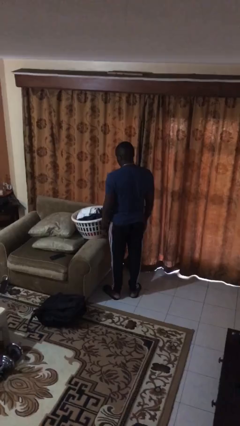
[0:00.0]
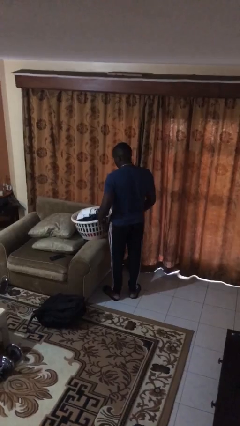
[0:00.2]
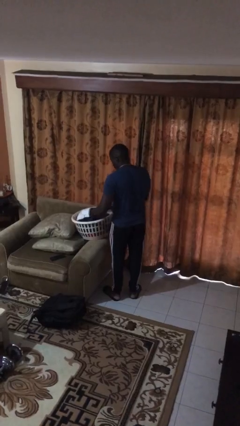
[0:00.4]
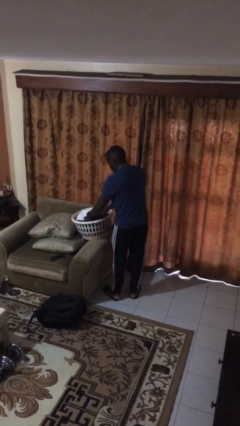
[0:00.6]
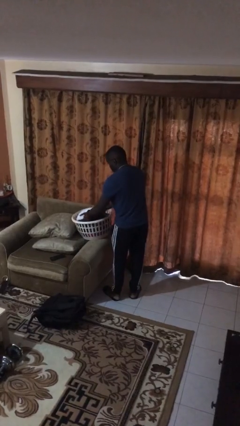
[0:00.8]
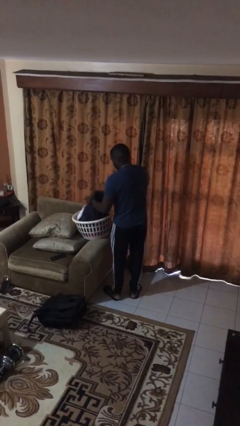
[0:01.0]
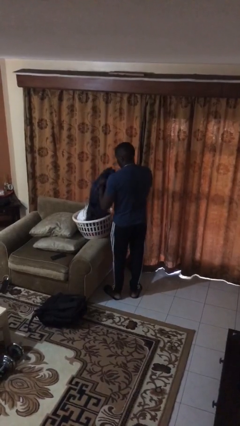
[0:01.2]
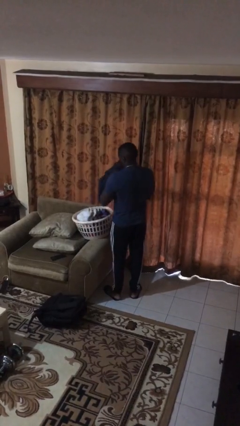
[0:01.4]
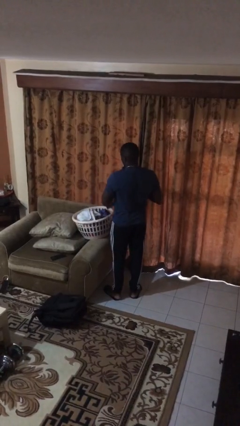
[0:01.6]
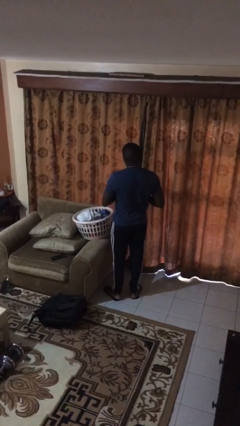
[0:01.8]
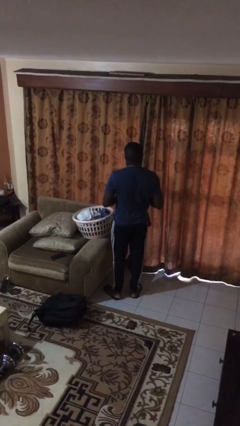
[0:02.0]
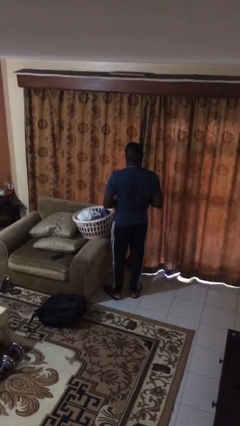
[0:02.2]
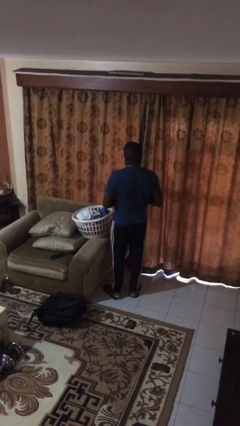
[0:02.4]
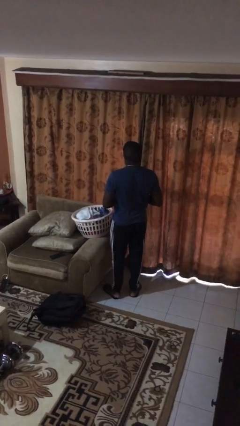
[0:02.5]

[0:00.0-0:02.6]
person takes object from basket

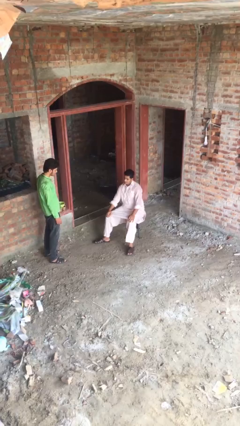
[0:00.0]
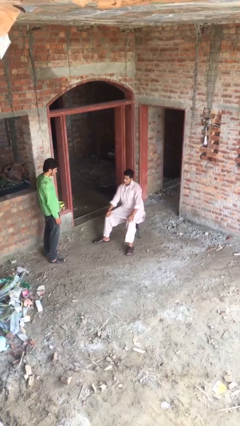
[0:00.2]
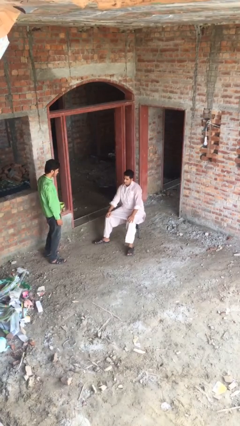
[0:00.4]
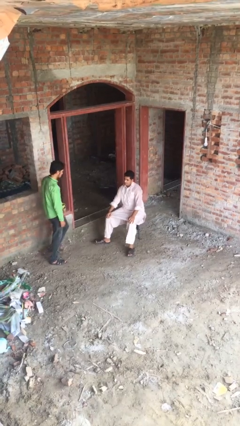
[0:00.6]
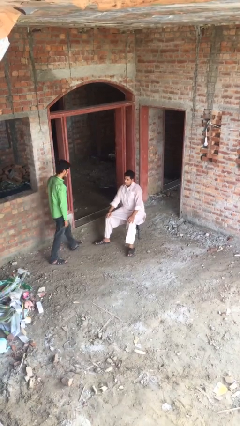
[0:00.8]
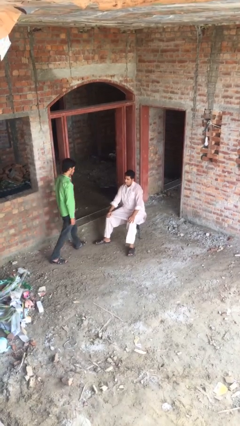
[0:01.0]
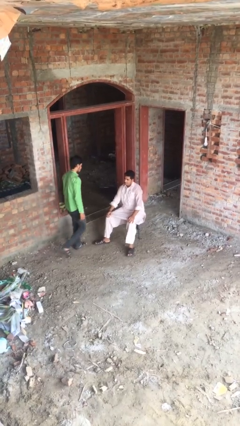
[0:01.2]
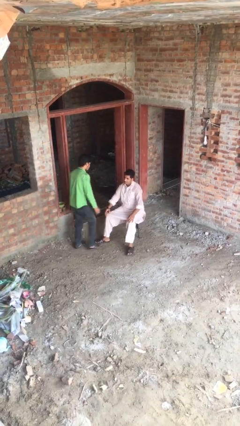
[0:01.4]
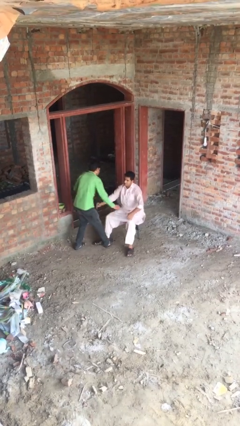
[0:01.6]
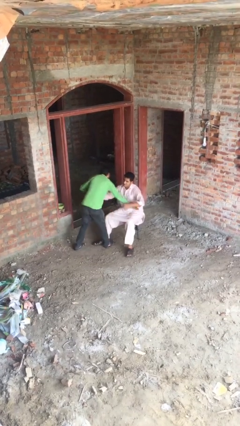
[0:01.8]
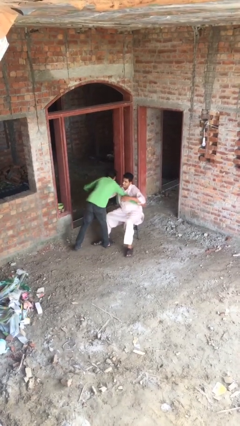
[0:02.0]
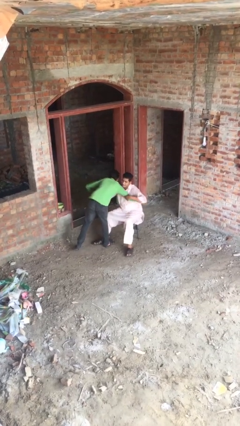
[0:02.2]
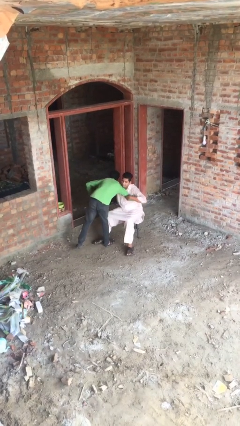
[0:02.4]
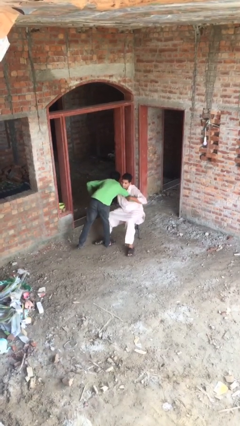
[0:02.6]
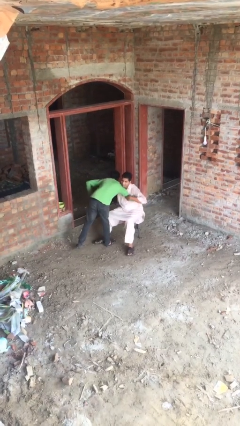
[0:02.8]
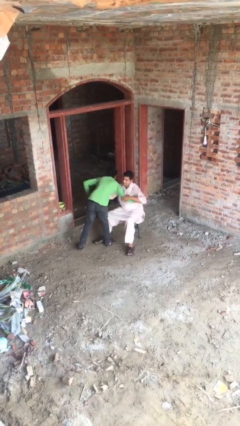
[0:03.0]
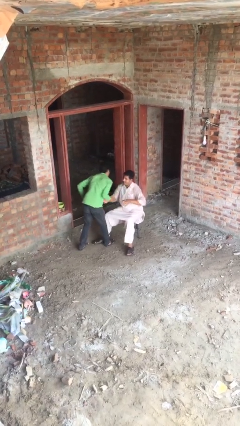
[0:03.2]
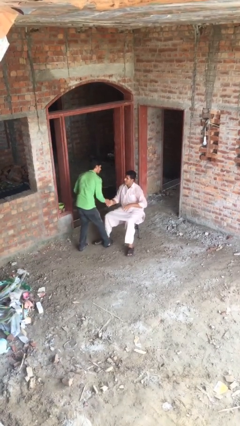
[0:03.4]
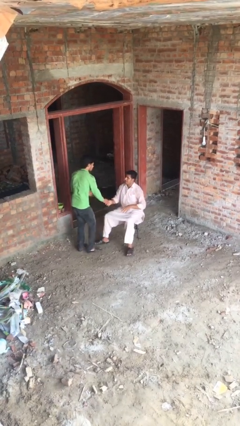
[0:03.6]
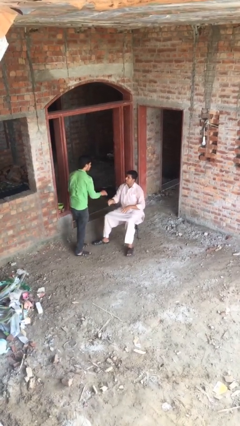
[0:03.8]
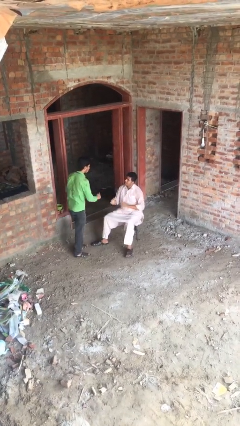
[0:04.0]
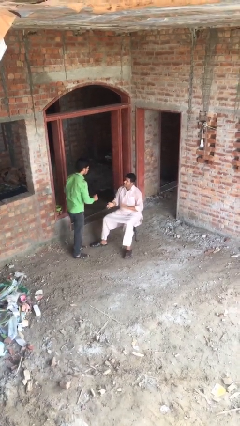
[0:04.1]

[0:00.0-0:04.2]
person embraces person

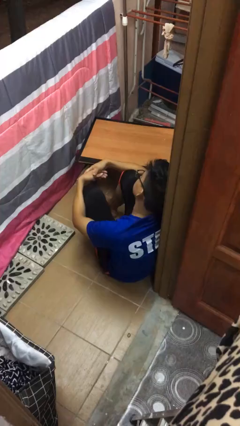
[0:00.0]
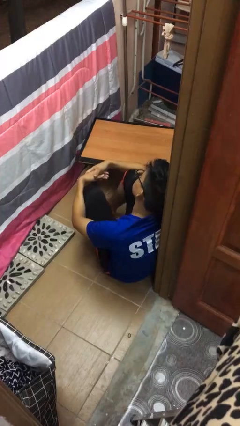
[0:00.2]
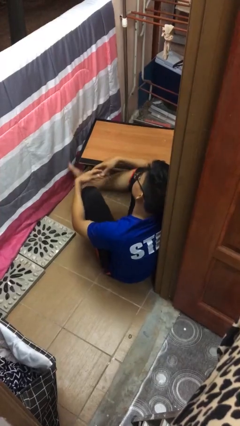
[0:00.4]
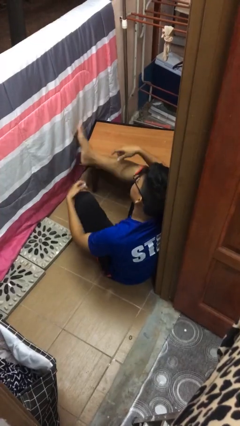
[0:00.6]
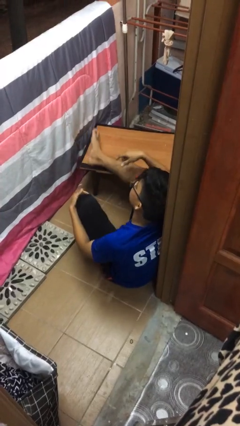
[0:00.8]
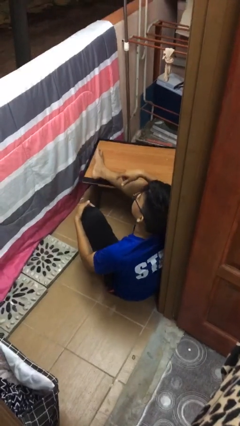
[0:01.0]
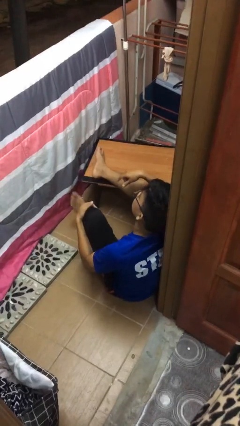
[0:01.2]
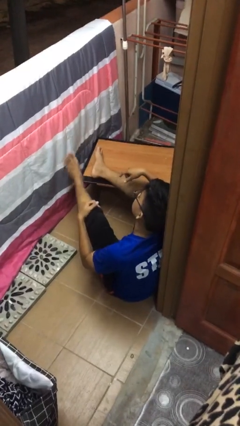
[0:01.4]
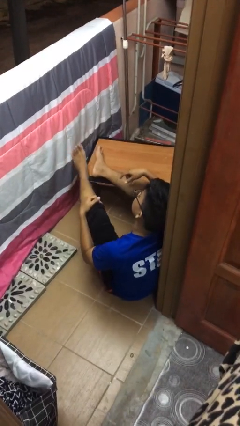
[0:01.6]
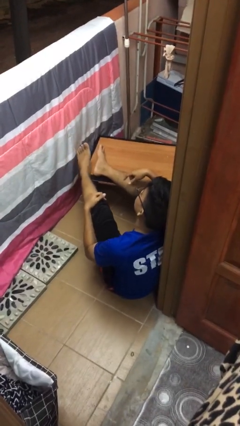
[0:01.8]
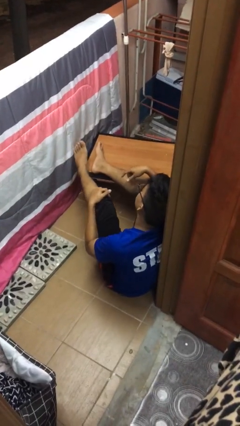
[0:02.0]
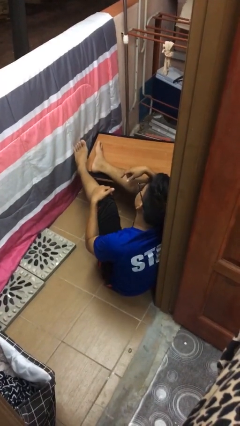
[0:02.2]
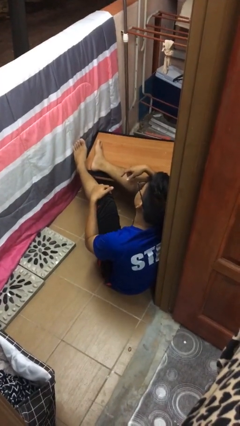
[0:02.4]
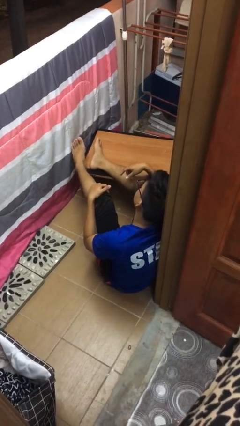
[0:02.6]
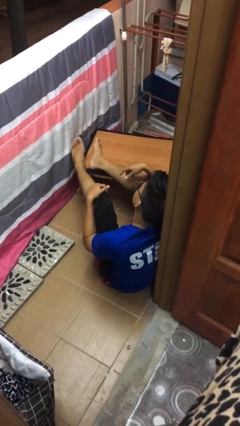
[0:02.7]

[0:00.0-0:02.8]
person puts feet up

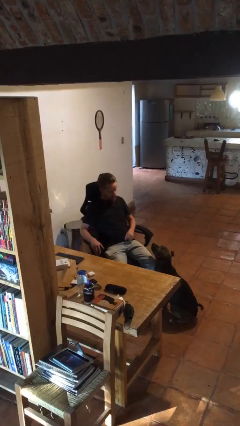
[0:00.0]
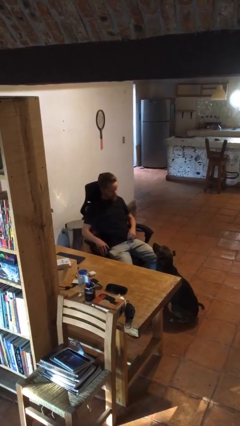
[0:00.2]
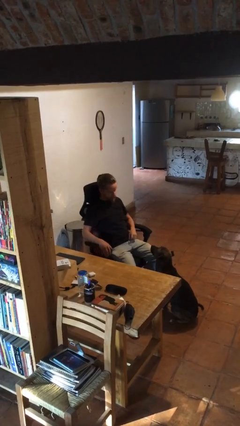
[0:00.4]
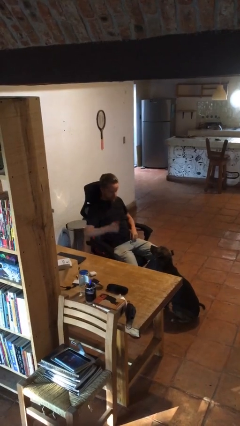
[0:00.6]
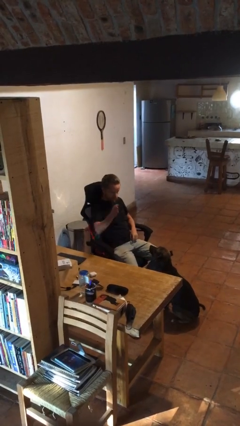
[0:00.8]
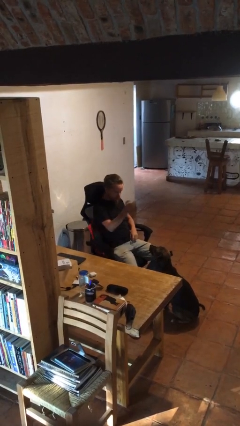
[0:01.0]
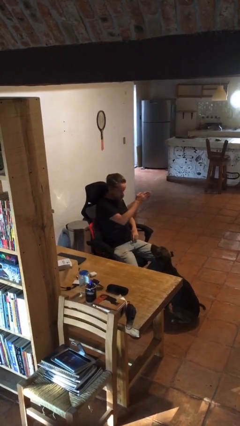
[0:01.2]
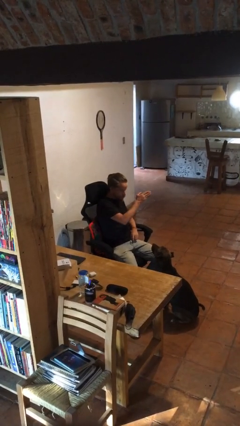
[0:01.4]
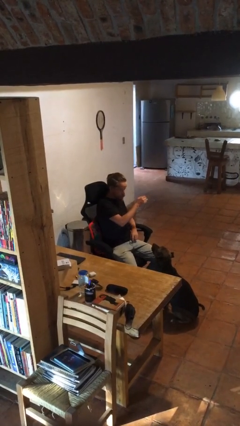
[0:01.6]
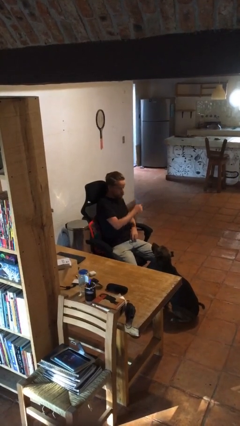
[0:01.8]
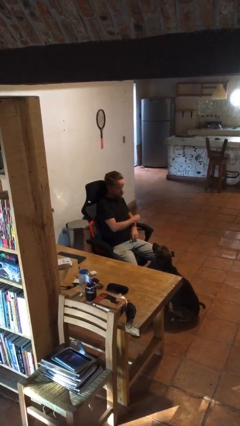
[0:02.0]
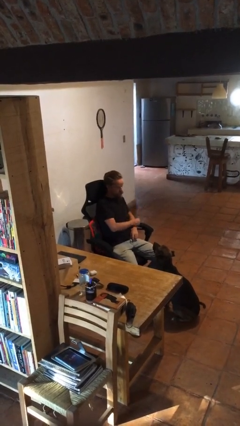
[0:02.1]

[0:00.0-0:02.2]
person gestures swipe left

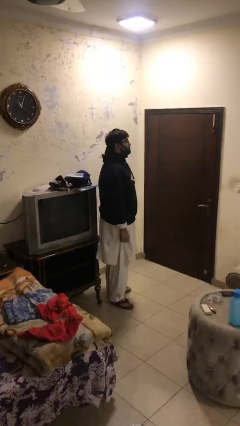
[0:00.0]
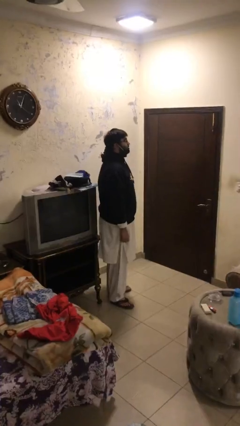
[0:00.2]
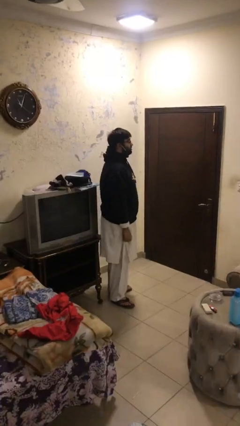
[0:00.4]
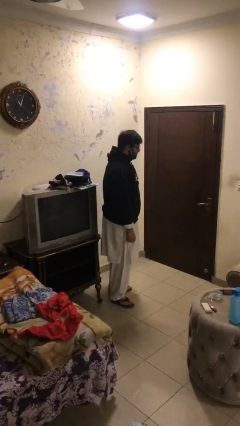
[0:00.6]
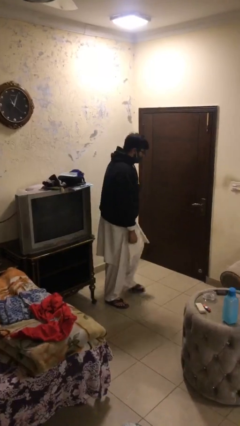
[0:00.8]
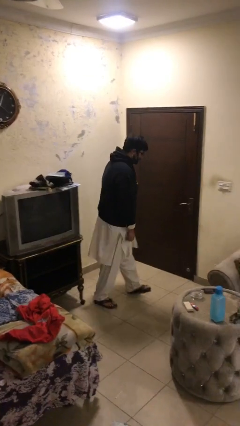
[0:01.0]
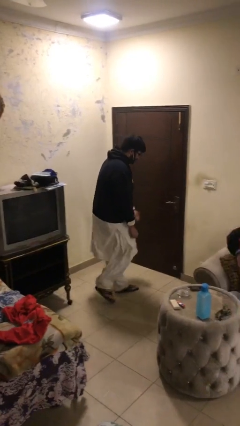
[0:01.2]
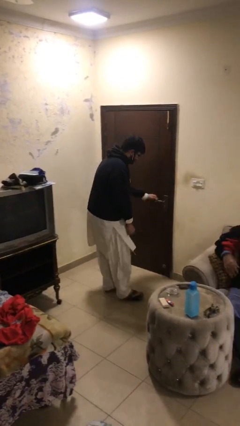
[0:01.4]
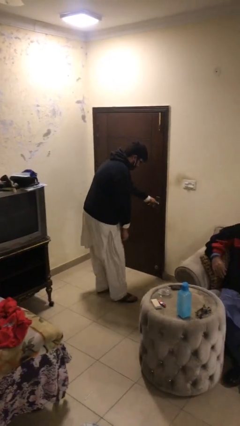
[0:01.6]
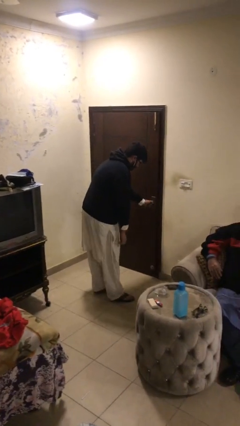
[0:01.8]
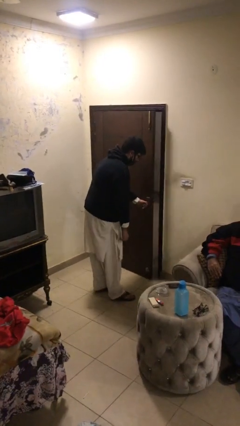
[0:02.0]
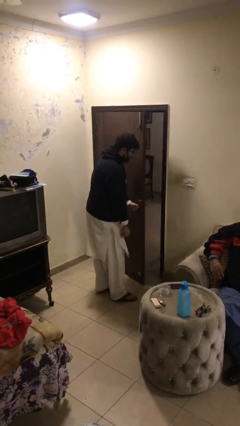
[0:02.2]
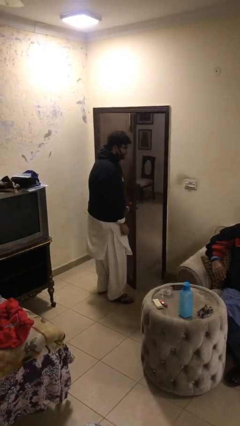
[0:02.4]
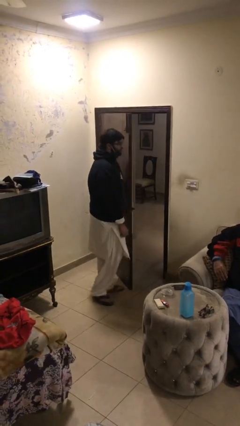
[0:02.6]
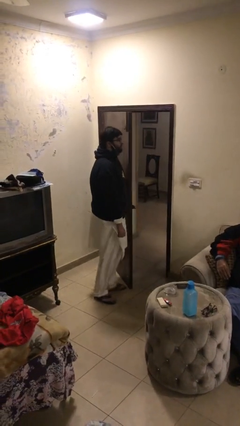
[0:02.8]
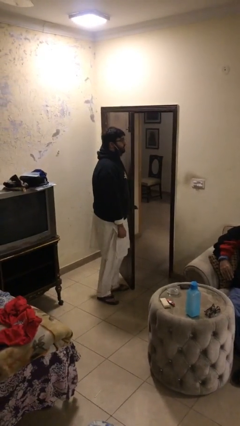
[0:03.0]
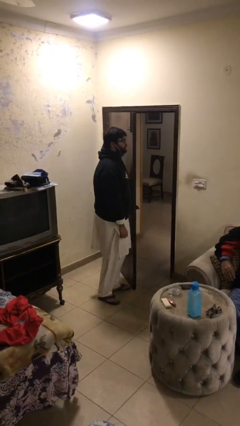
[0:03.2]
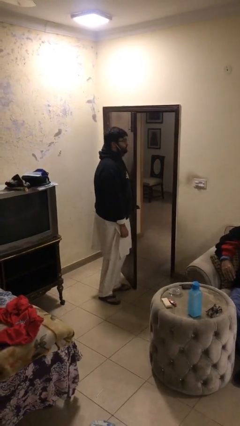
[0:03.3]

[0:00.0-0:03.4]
person opens facility door

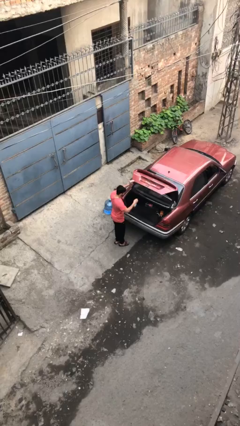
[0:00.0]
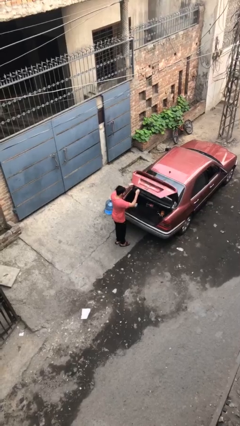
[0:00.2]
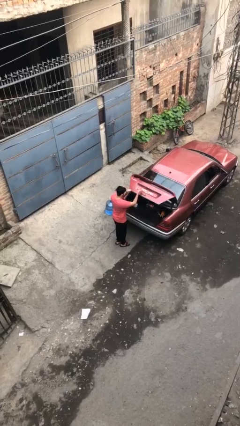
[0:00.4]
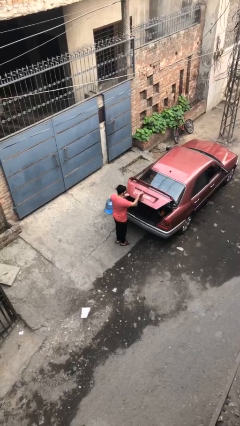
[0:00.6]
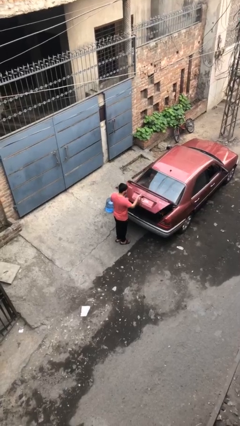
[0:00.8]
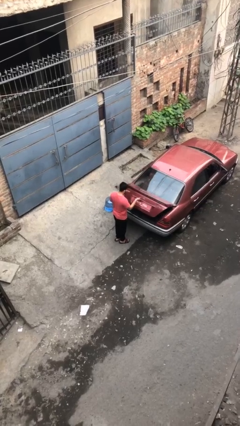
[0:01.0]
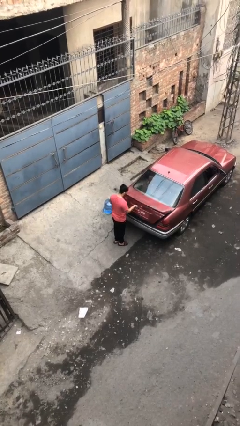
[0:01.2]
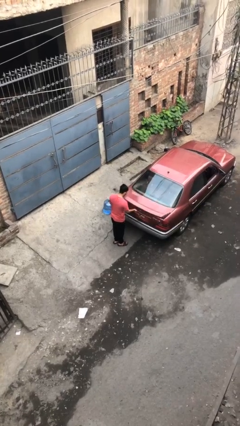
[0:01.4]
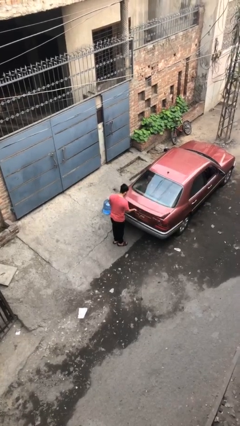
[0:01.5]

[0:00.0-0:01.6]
person closes car trunk

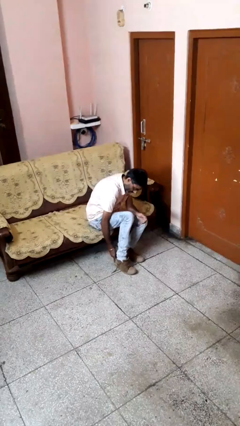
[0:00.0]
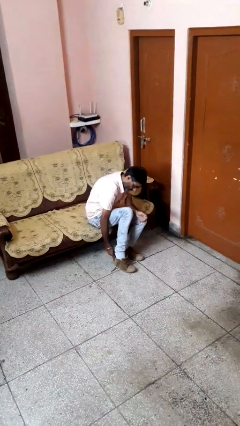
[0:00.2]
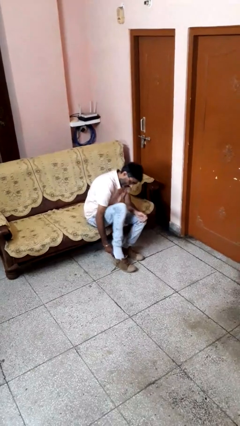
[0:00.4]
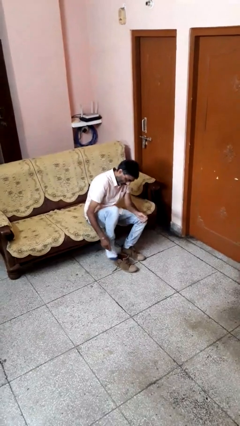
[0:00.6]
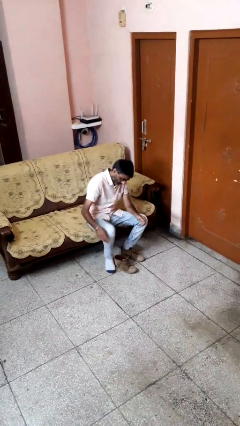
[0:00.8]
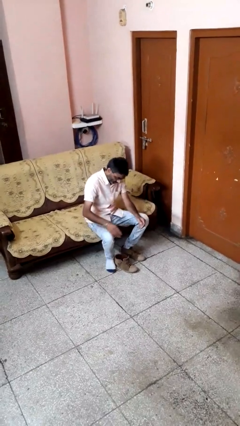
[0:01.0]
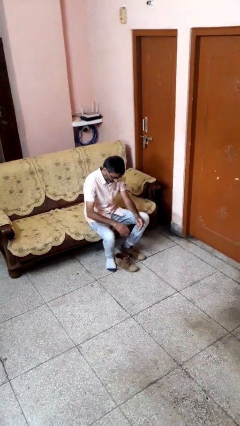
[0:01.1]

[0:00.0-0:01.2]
person takes off shoes
